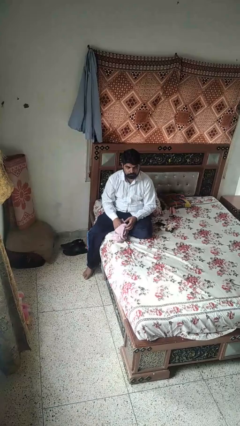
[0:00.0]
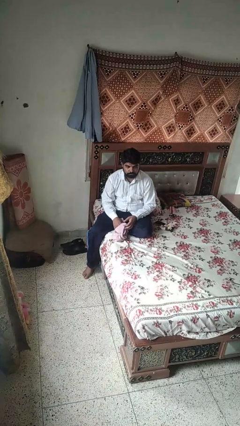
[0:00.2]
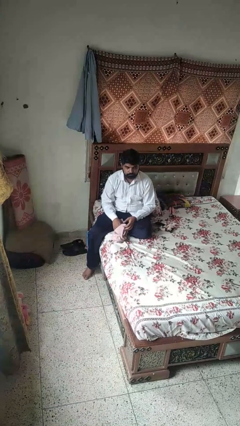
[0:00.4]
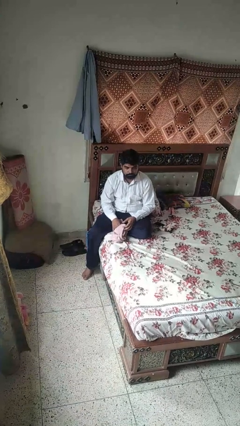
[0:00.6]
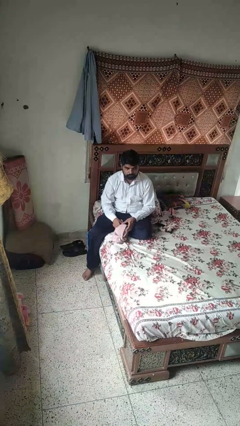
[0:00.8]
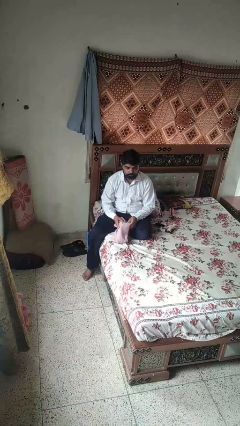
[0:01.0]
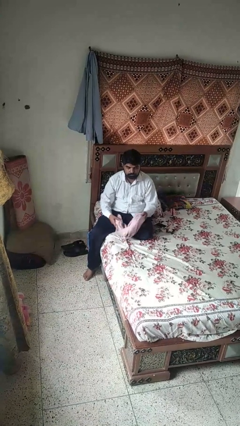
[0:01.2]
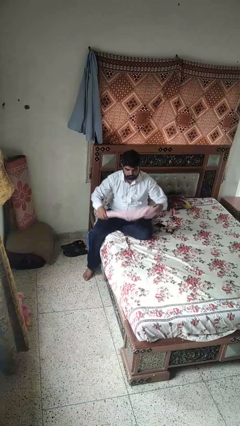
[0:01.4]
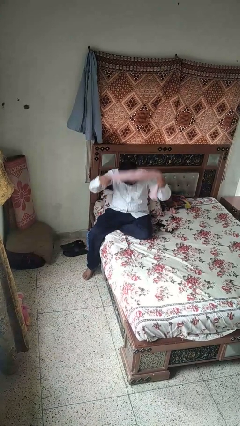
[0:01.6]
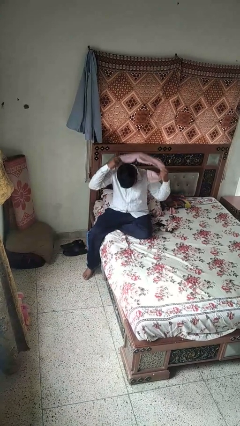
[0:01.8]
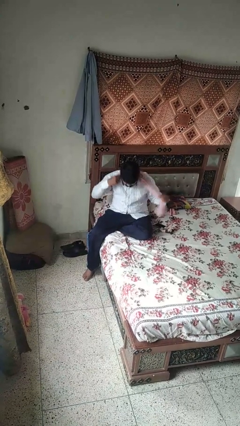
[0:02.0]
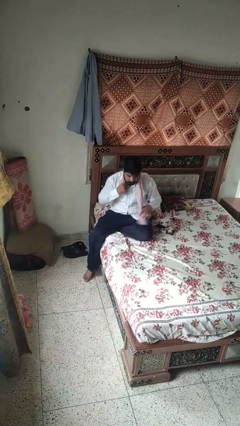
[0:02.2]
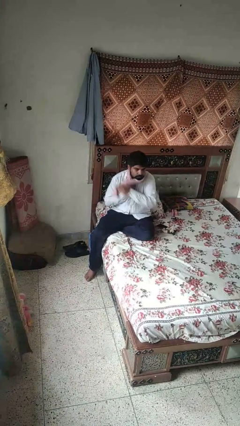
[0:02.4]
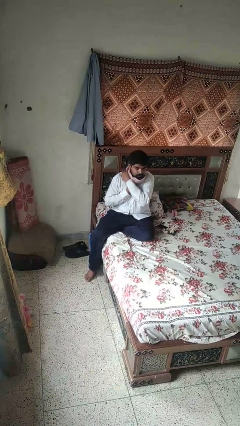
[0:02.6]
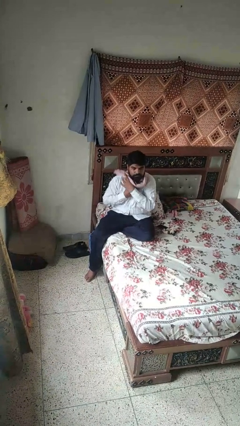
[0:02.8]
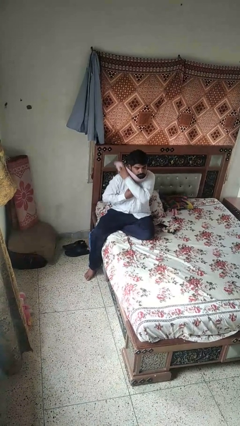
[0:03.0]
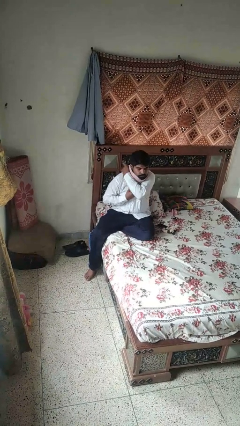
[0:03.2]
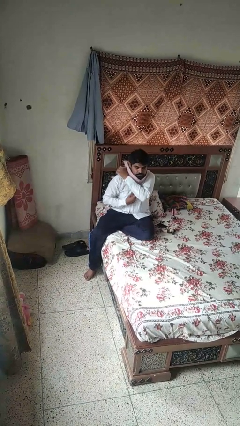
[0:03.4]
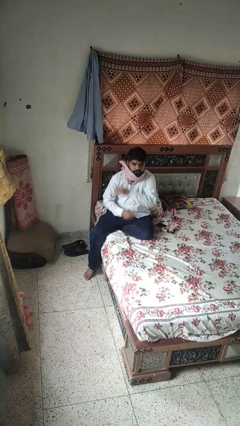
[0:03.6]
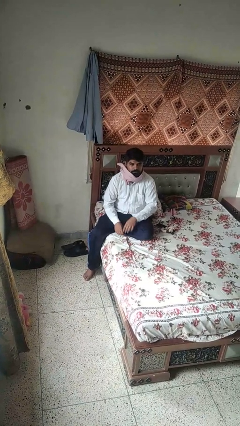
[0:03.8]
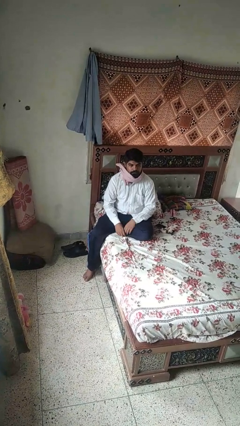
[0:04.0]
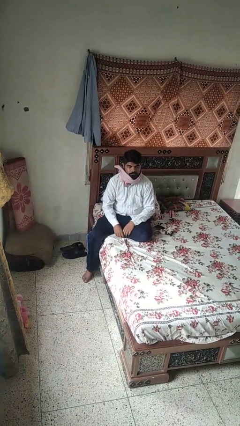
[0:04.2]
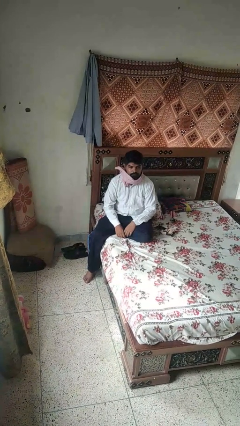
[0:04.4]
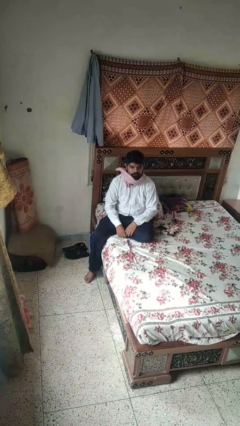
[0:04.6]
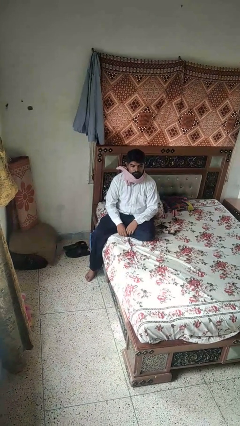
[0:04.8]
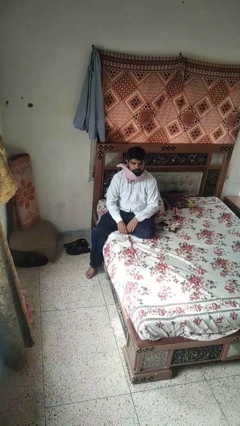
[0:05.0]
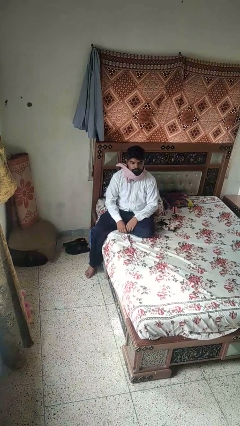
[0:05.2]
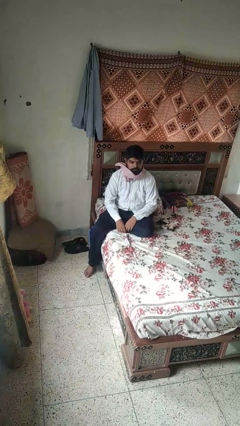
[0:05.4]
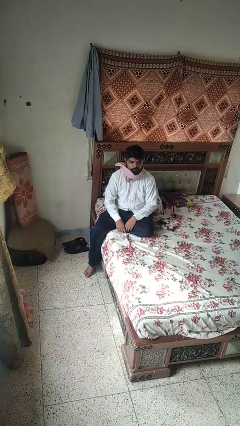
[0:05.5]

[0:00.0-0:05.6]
person puts on scarf

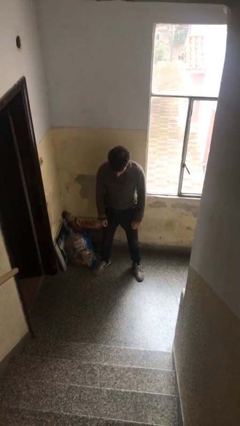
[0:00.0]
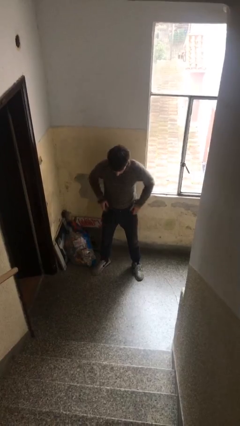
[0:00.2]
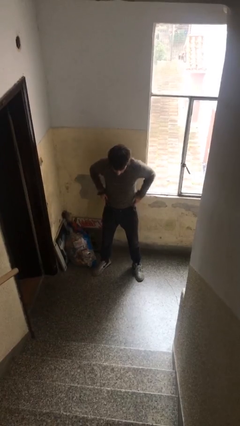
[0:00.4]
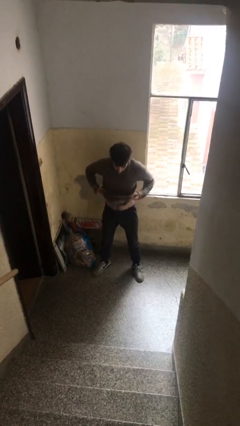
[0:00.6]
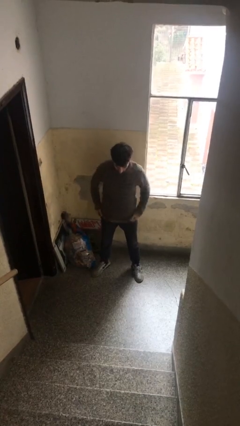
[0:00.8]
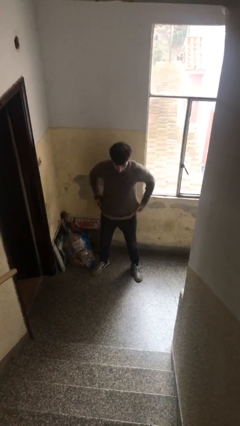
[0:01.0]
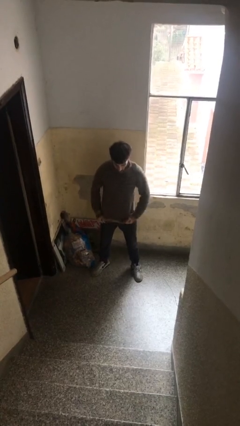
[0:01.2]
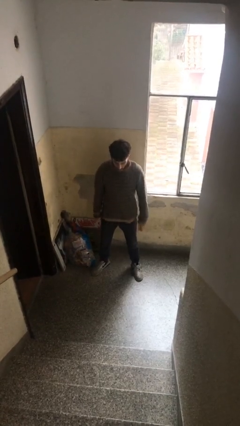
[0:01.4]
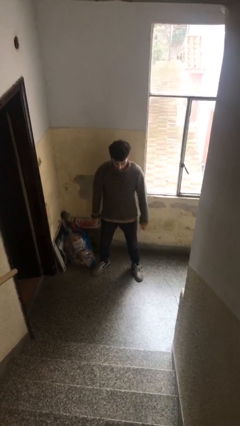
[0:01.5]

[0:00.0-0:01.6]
person untucks shirt

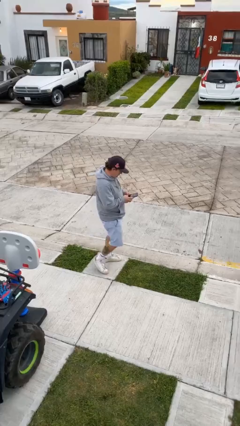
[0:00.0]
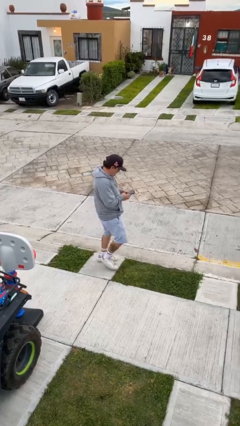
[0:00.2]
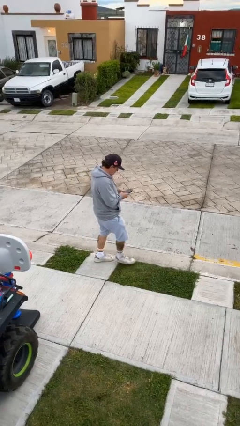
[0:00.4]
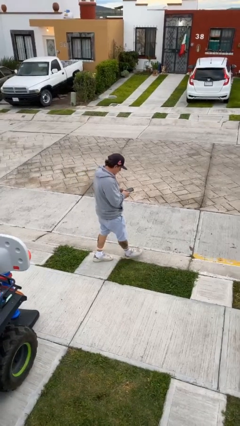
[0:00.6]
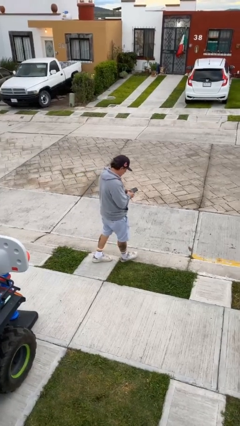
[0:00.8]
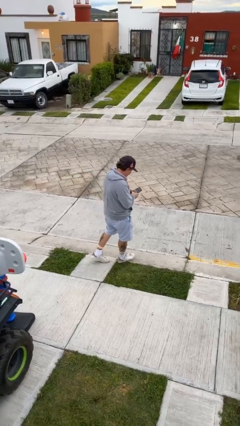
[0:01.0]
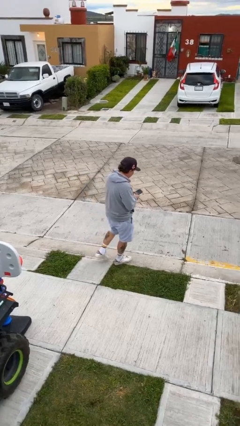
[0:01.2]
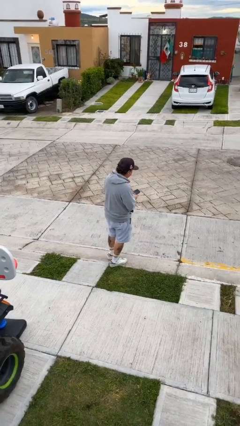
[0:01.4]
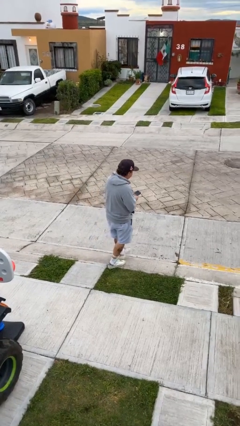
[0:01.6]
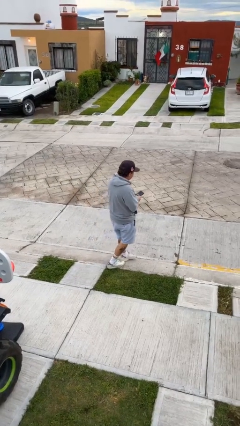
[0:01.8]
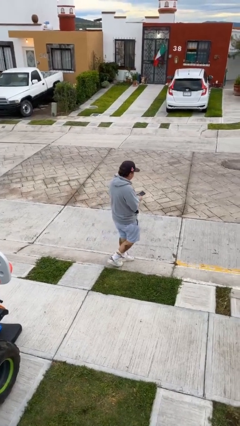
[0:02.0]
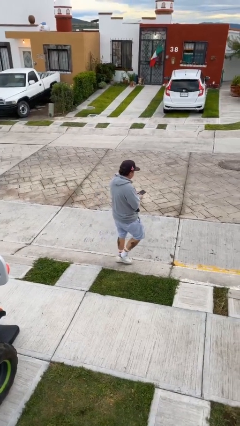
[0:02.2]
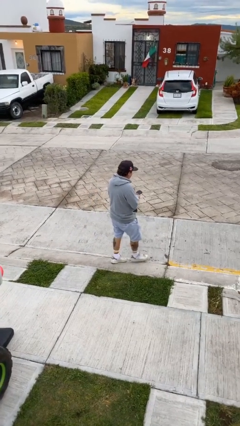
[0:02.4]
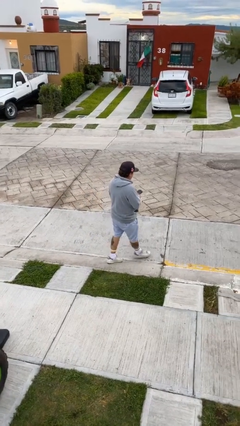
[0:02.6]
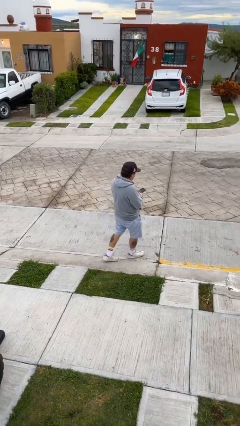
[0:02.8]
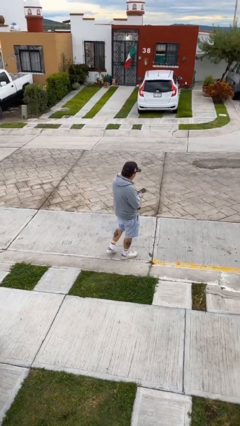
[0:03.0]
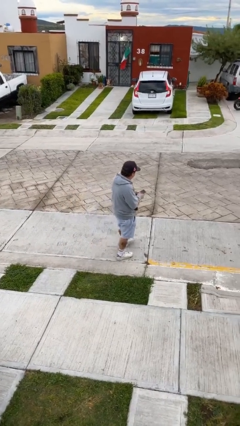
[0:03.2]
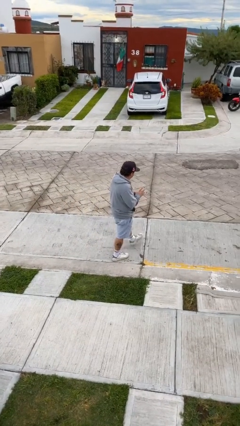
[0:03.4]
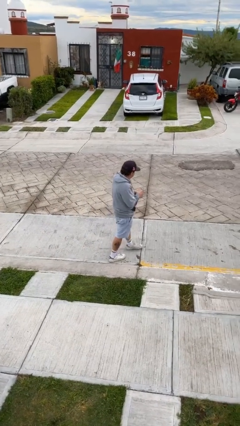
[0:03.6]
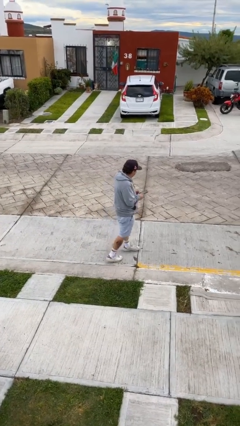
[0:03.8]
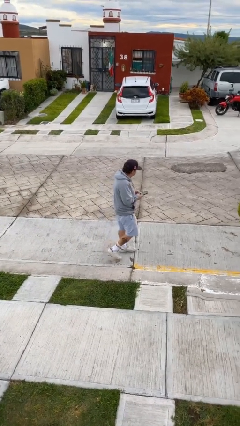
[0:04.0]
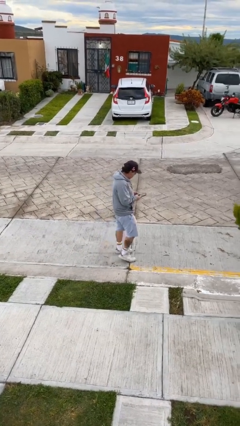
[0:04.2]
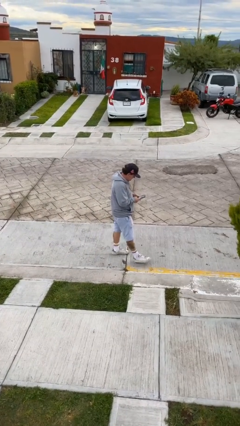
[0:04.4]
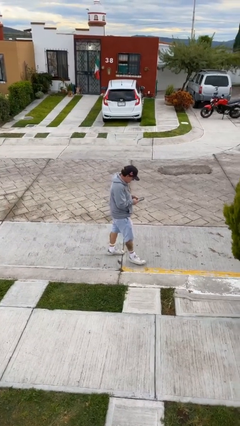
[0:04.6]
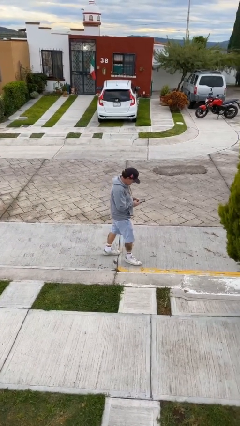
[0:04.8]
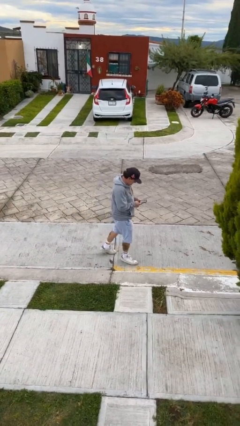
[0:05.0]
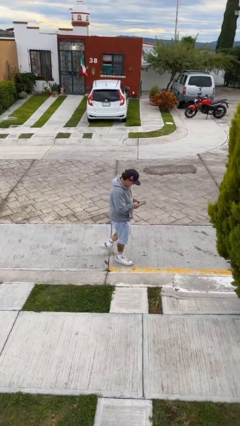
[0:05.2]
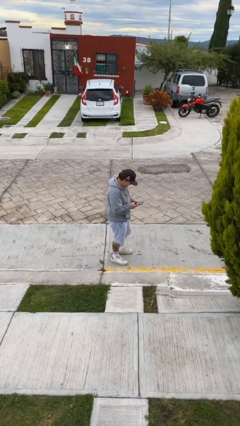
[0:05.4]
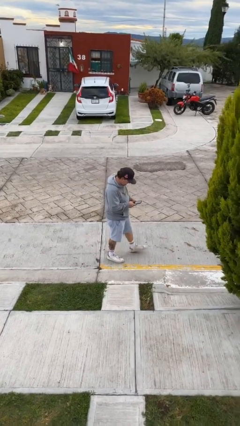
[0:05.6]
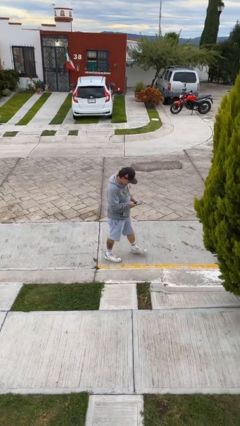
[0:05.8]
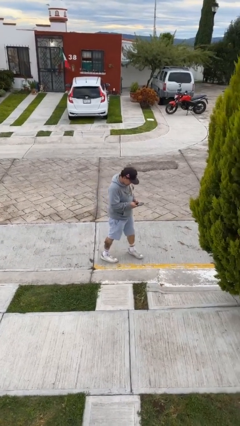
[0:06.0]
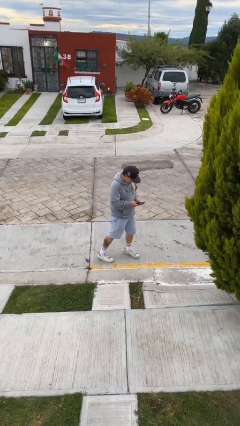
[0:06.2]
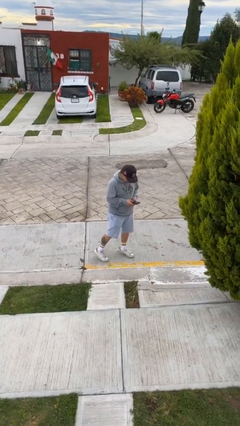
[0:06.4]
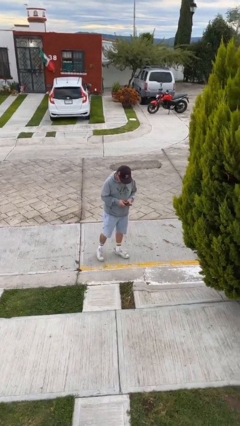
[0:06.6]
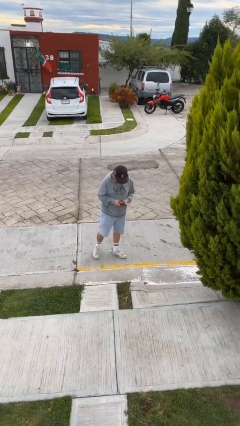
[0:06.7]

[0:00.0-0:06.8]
person texts on phone

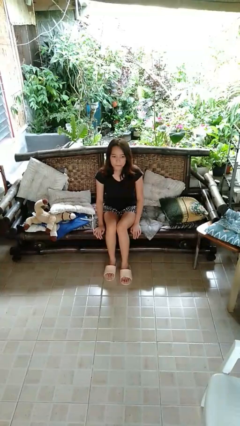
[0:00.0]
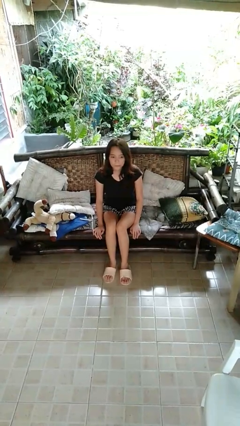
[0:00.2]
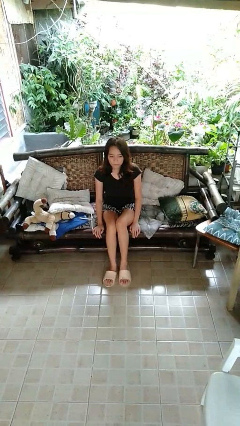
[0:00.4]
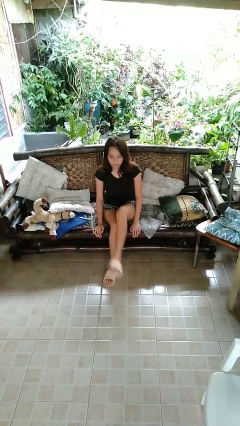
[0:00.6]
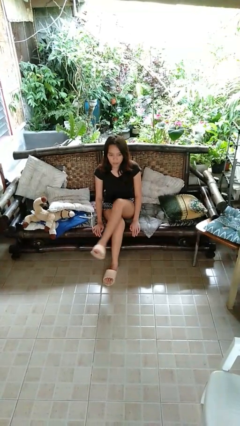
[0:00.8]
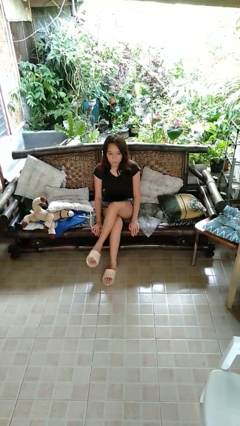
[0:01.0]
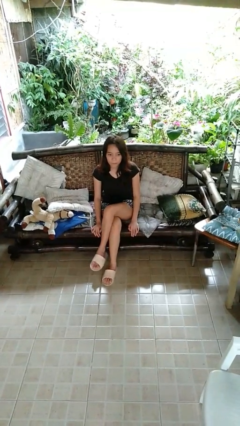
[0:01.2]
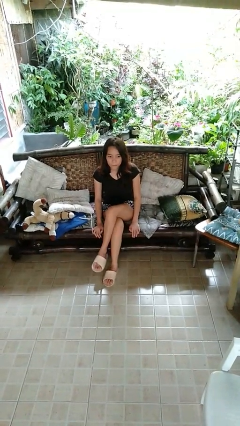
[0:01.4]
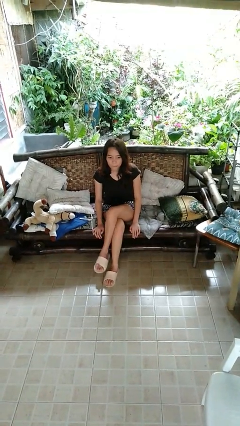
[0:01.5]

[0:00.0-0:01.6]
person crosses legs

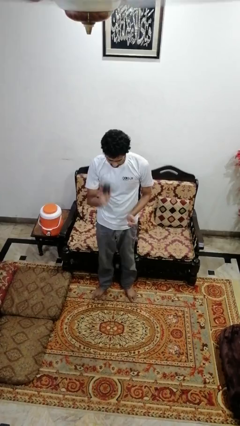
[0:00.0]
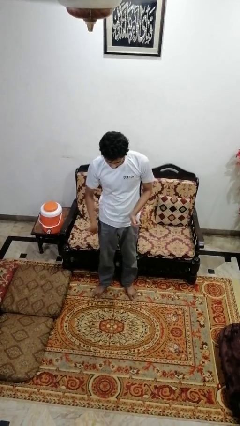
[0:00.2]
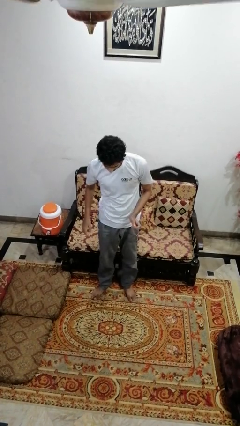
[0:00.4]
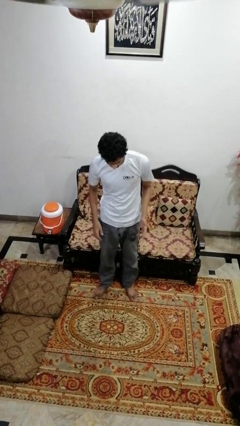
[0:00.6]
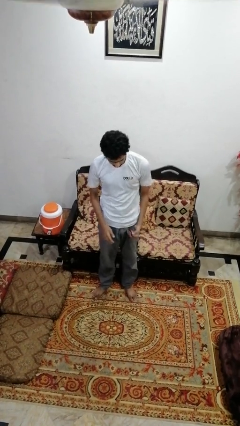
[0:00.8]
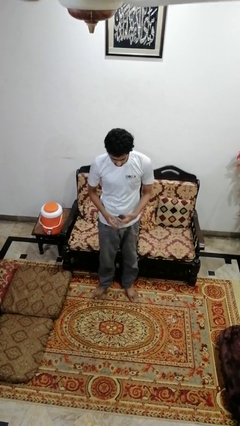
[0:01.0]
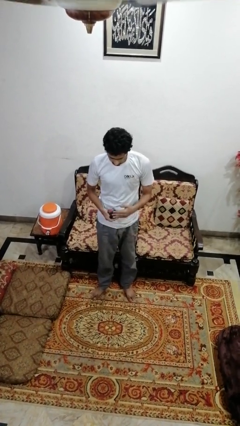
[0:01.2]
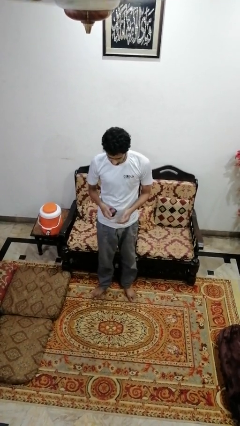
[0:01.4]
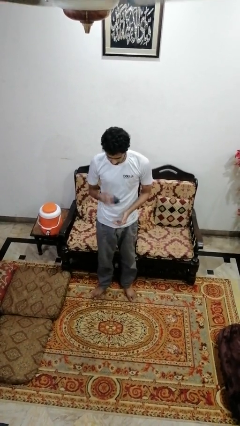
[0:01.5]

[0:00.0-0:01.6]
person bounces ball on floor

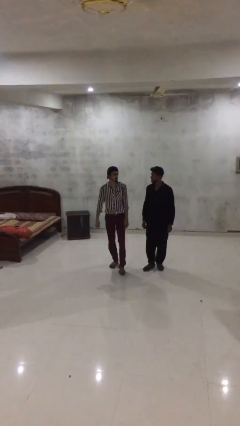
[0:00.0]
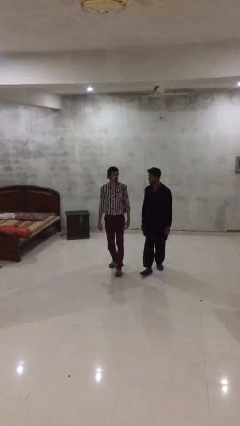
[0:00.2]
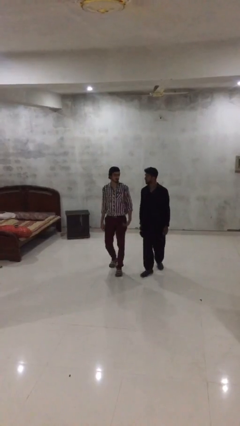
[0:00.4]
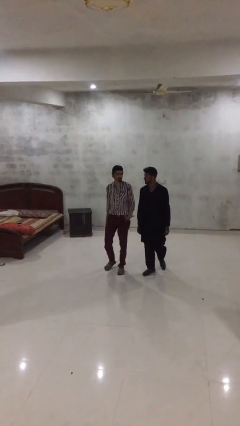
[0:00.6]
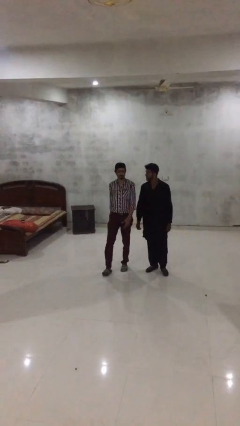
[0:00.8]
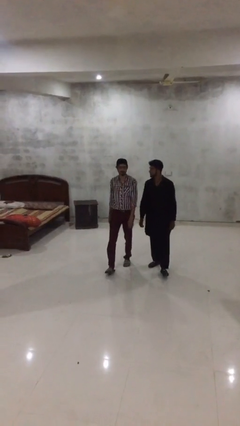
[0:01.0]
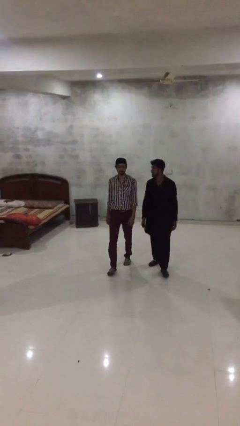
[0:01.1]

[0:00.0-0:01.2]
person talks to person
